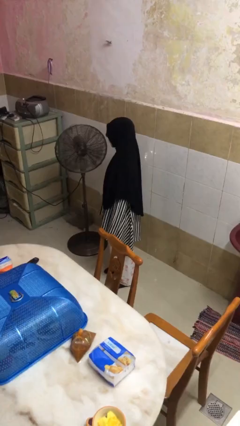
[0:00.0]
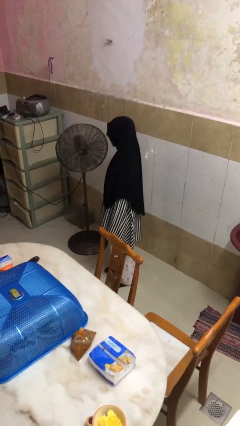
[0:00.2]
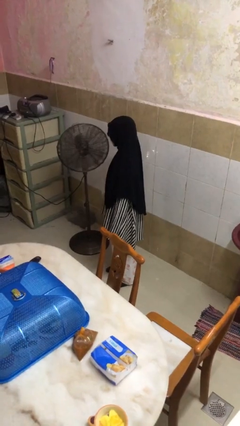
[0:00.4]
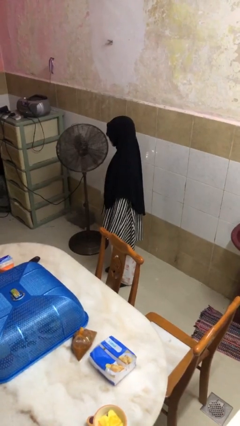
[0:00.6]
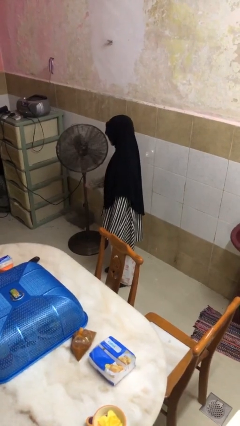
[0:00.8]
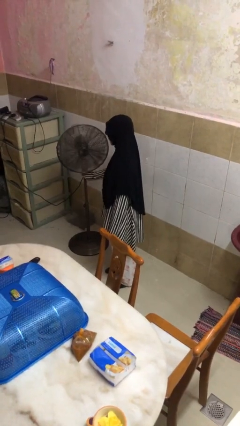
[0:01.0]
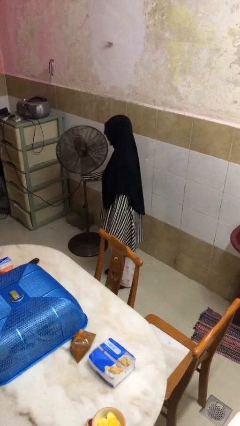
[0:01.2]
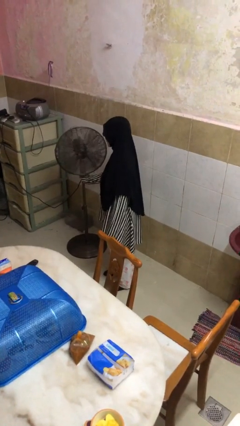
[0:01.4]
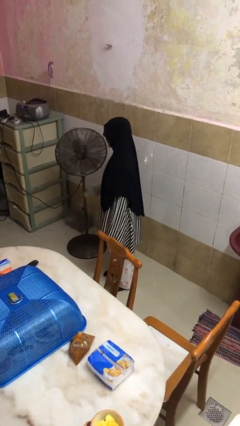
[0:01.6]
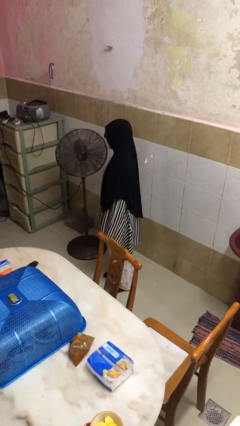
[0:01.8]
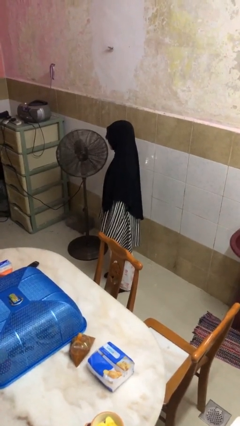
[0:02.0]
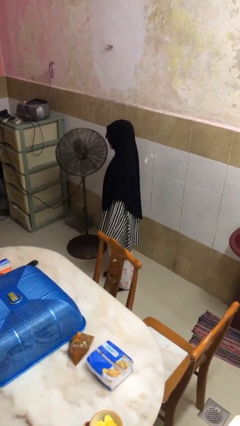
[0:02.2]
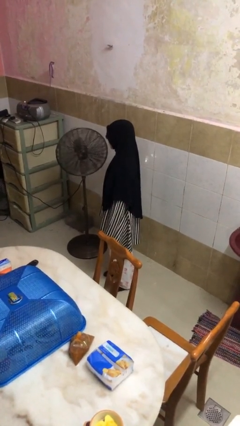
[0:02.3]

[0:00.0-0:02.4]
person turns on fan

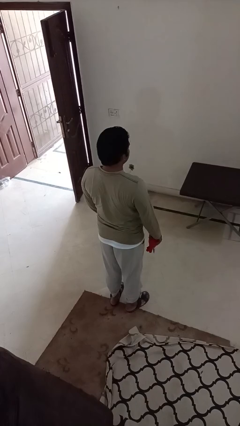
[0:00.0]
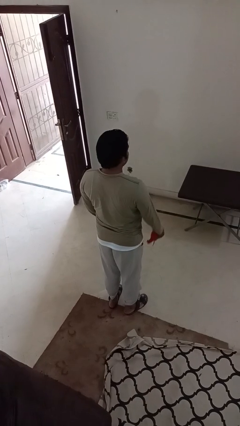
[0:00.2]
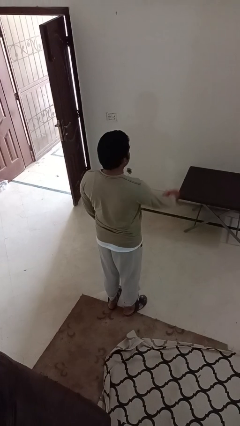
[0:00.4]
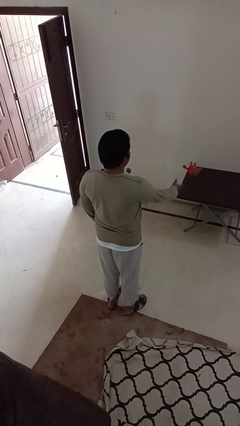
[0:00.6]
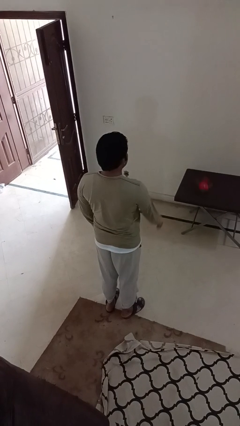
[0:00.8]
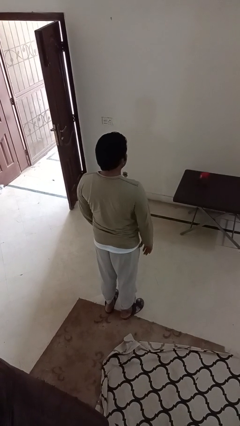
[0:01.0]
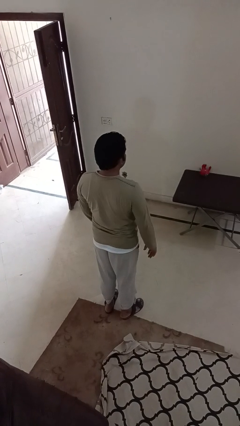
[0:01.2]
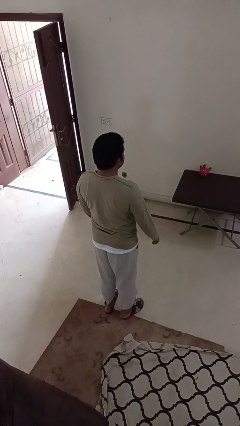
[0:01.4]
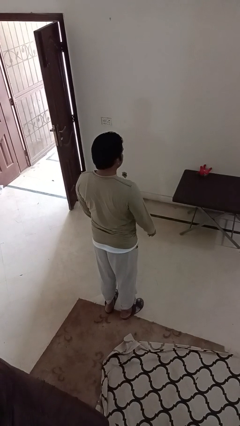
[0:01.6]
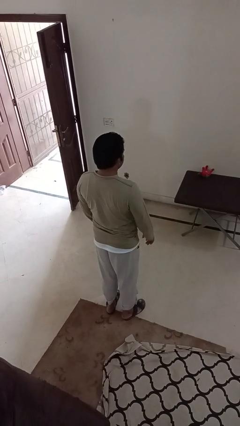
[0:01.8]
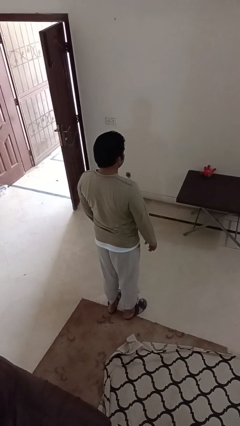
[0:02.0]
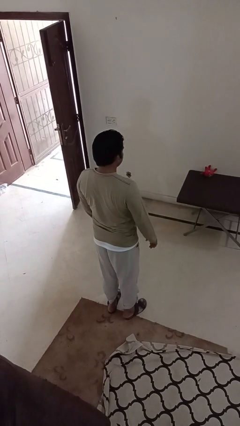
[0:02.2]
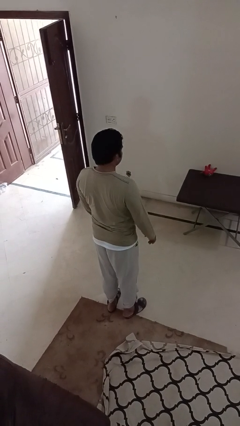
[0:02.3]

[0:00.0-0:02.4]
person throws object on table

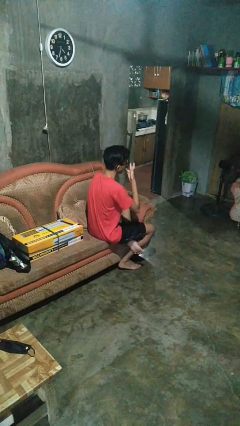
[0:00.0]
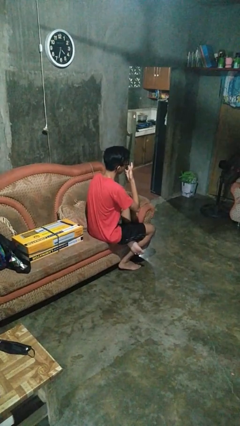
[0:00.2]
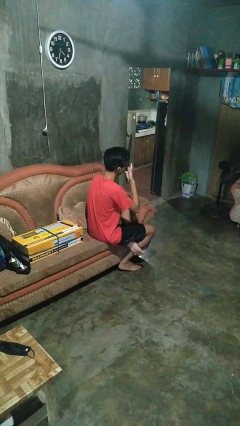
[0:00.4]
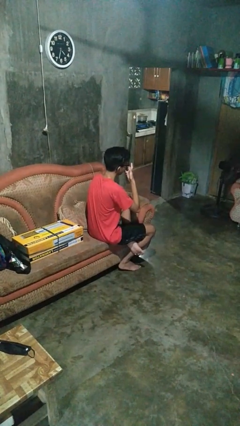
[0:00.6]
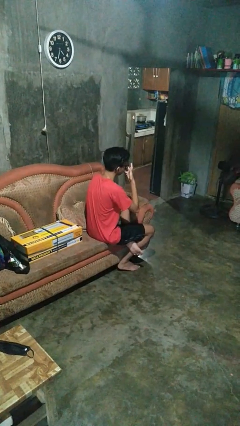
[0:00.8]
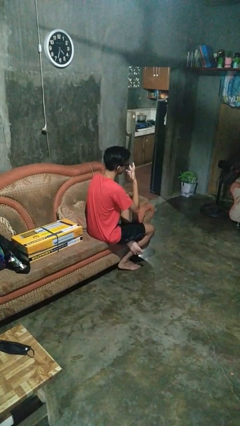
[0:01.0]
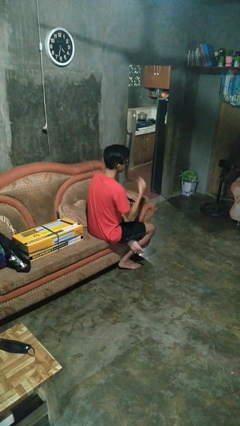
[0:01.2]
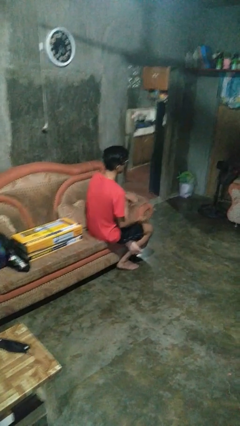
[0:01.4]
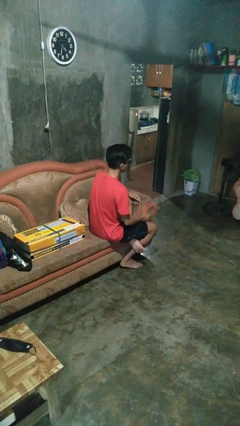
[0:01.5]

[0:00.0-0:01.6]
person licks fingers

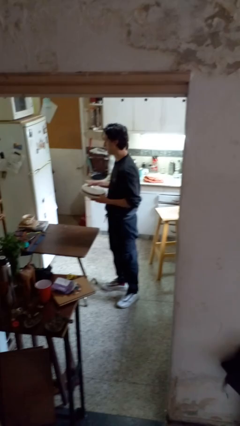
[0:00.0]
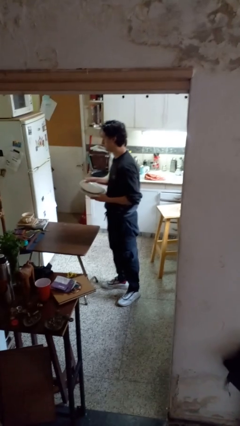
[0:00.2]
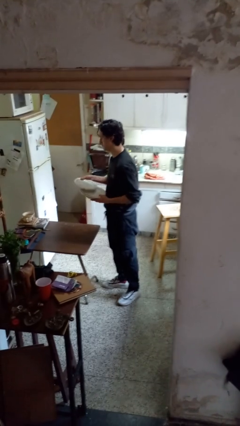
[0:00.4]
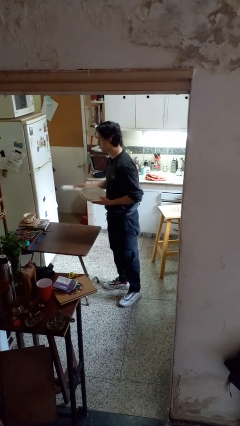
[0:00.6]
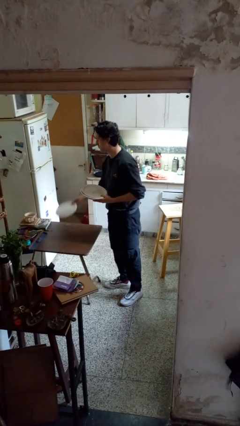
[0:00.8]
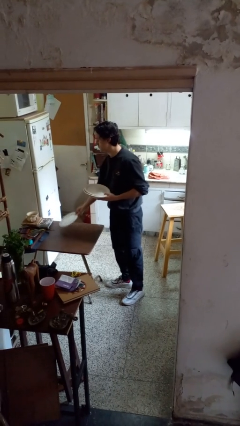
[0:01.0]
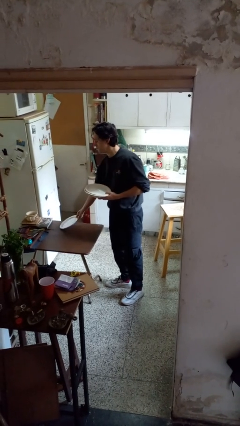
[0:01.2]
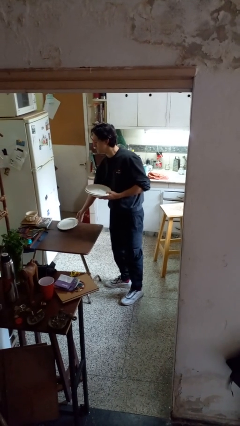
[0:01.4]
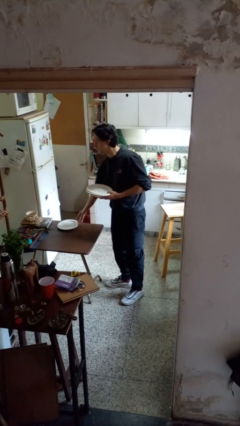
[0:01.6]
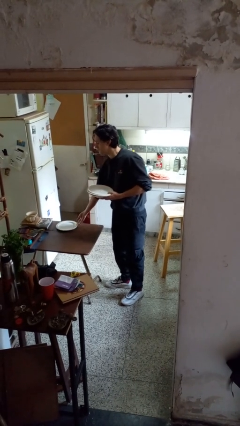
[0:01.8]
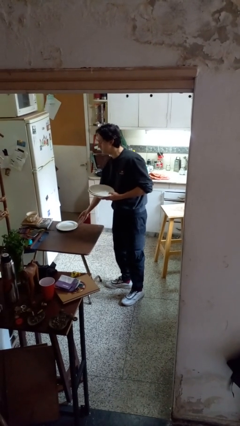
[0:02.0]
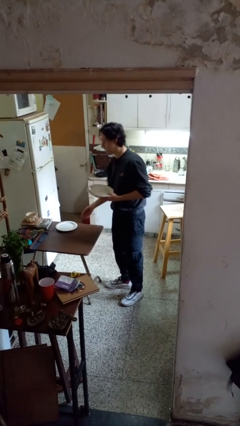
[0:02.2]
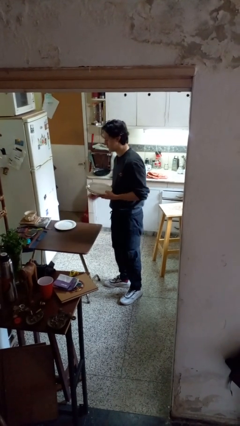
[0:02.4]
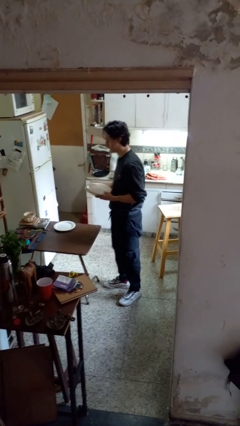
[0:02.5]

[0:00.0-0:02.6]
person sets table

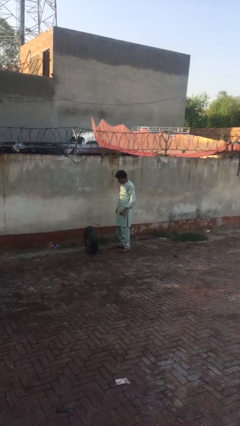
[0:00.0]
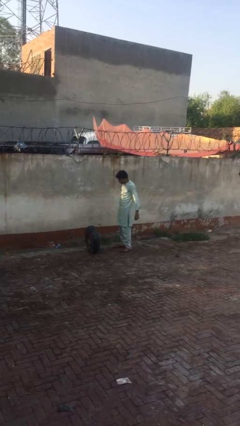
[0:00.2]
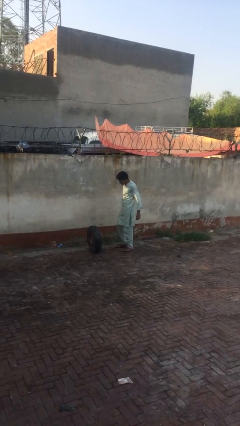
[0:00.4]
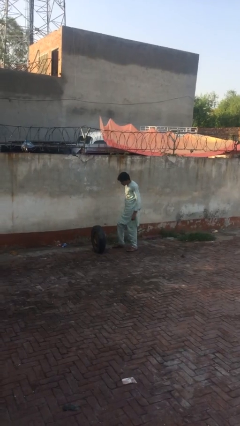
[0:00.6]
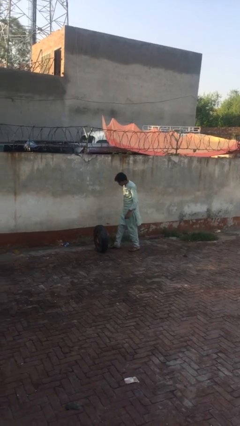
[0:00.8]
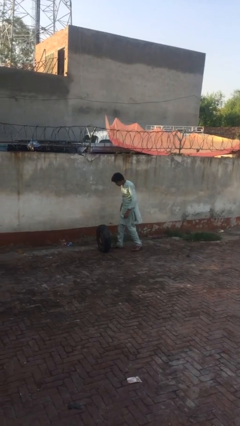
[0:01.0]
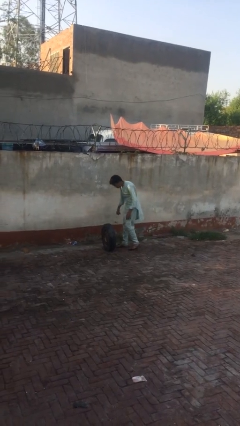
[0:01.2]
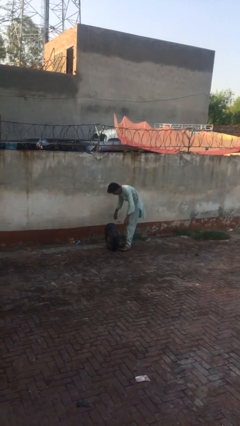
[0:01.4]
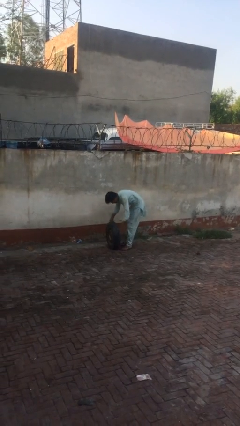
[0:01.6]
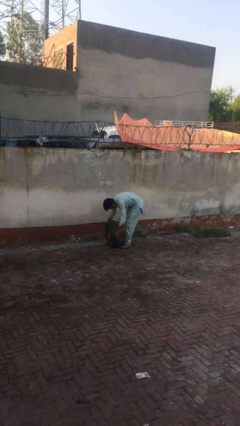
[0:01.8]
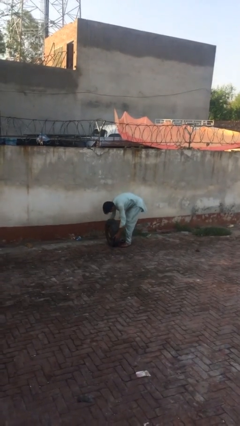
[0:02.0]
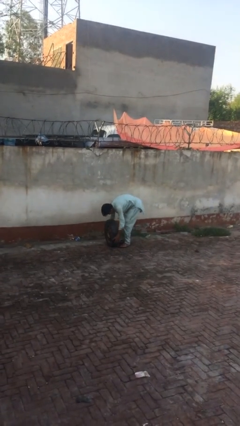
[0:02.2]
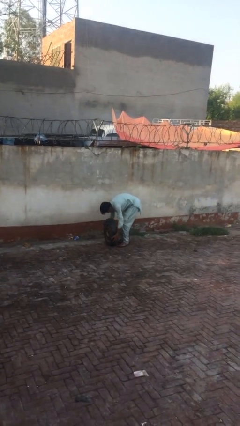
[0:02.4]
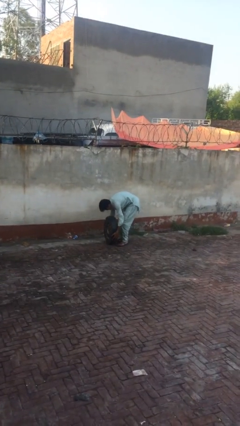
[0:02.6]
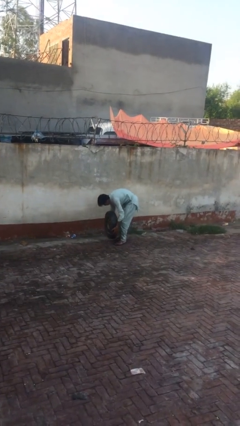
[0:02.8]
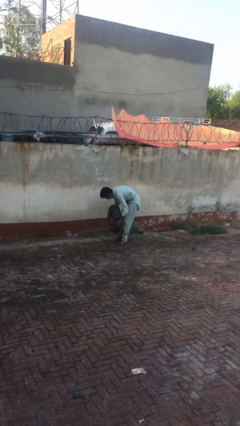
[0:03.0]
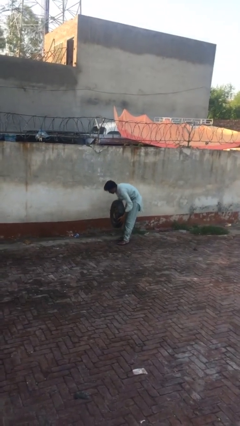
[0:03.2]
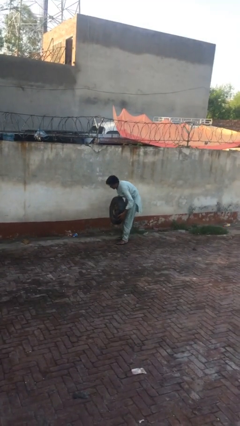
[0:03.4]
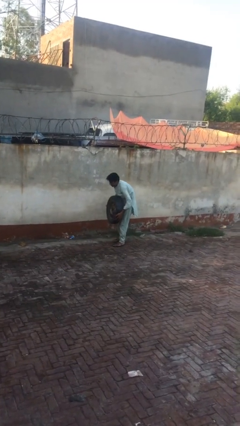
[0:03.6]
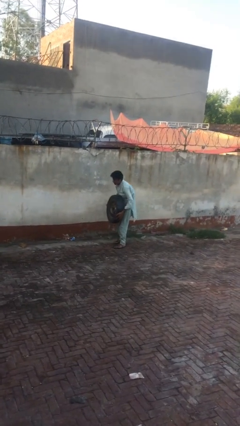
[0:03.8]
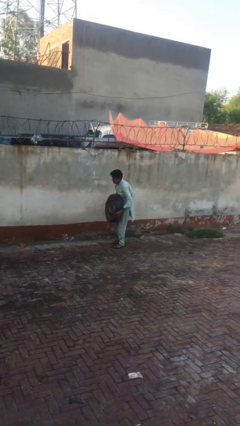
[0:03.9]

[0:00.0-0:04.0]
person picks up object from floor

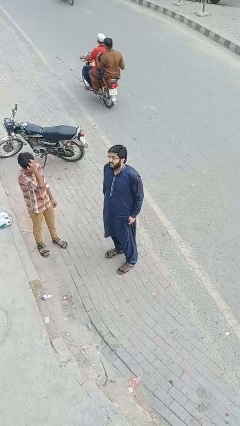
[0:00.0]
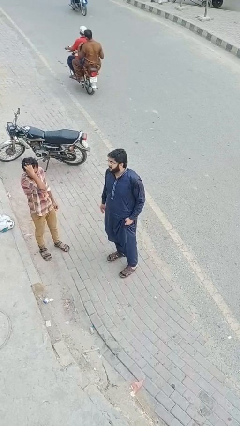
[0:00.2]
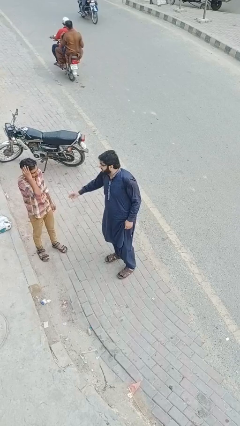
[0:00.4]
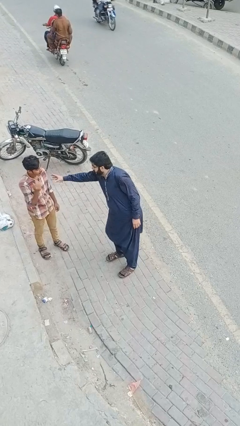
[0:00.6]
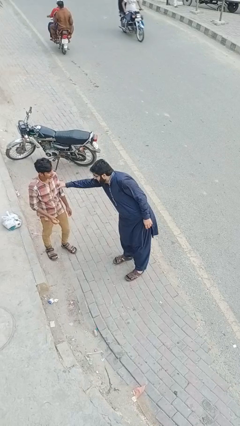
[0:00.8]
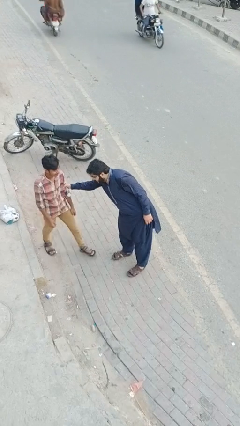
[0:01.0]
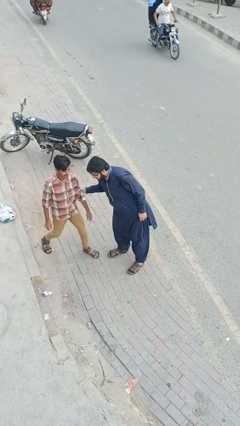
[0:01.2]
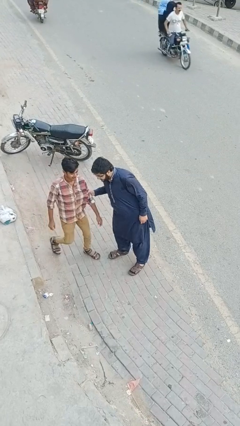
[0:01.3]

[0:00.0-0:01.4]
person grabs person by bicep

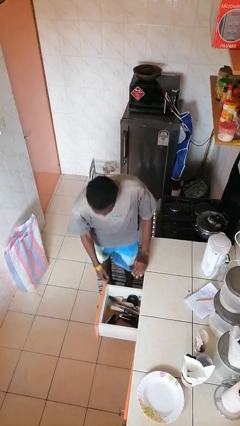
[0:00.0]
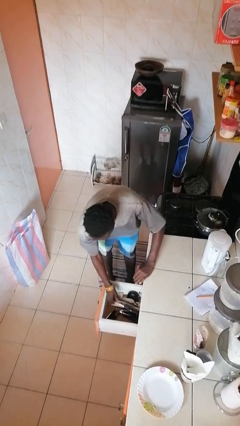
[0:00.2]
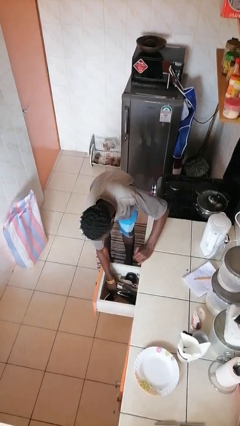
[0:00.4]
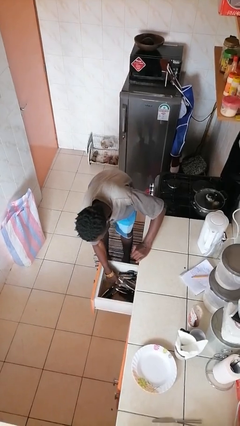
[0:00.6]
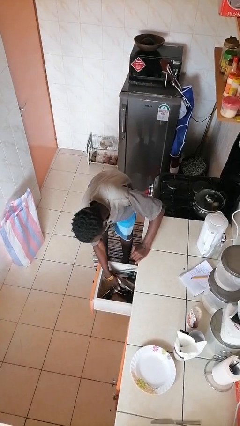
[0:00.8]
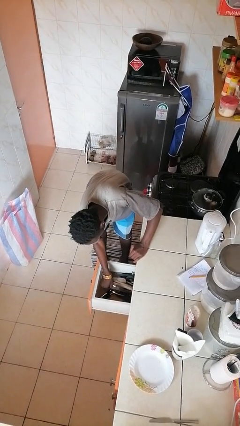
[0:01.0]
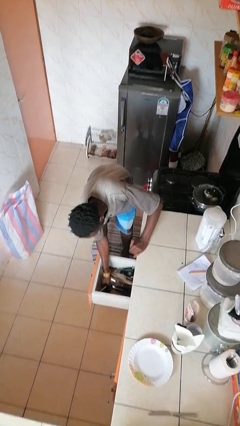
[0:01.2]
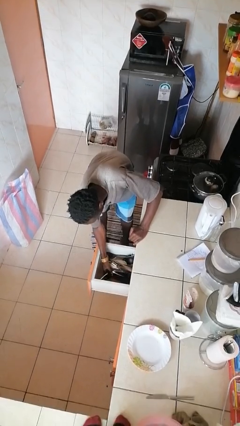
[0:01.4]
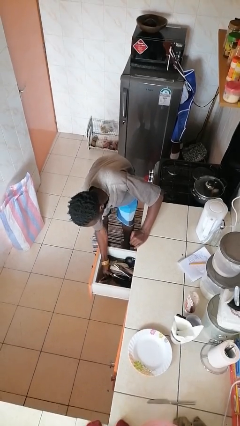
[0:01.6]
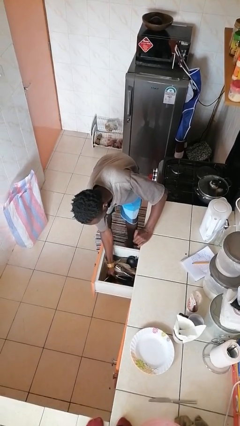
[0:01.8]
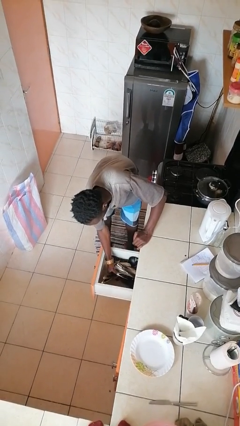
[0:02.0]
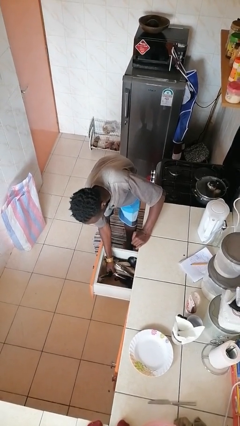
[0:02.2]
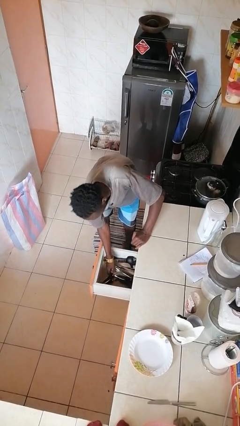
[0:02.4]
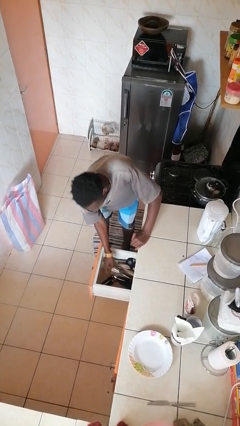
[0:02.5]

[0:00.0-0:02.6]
person searches in kitchen drawer
